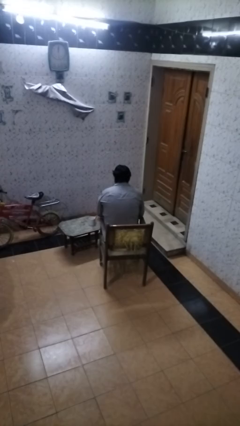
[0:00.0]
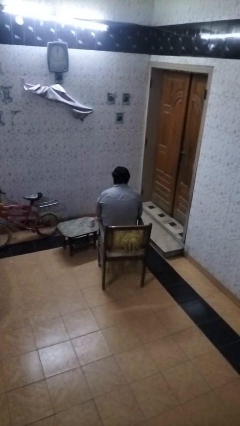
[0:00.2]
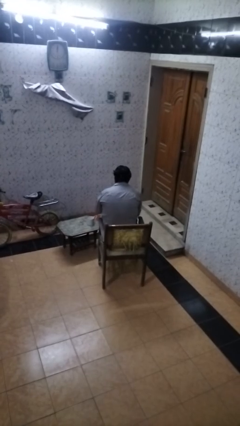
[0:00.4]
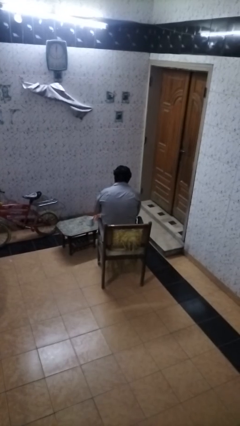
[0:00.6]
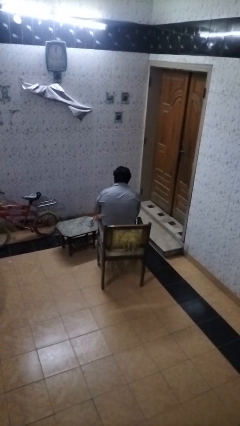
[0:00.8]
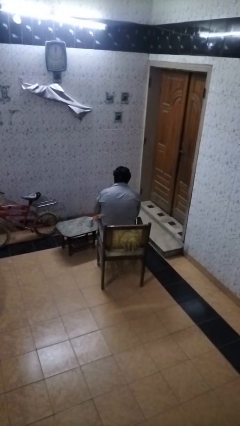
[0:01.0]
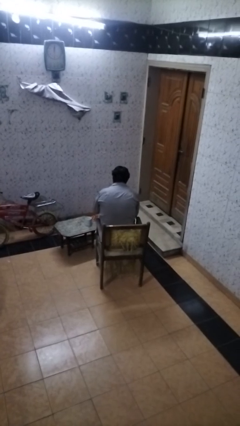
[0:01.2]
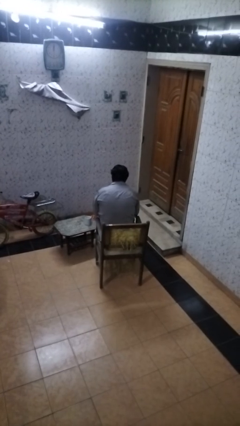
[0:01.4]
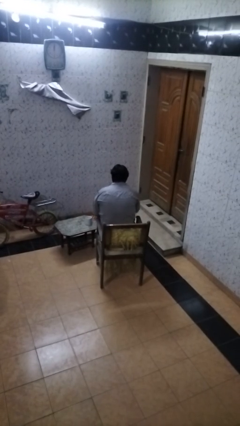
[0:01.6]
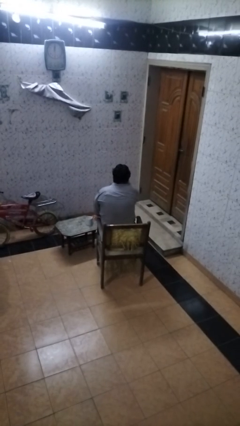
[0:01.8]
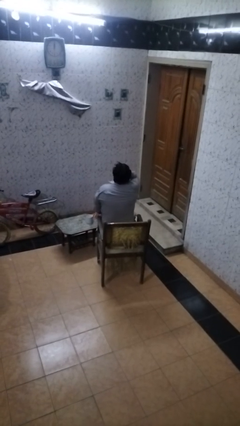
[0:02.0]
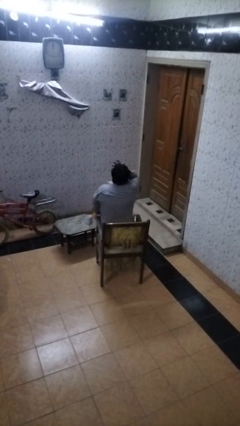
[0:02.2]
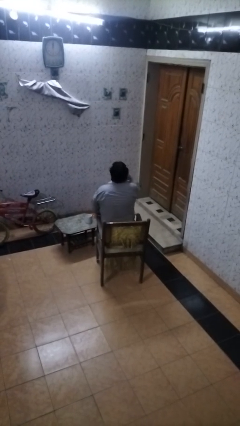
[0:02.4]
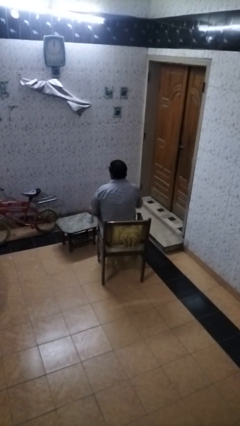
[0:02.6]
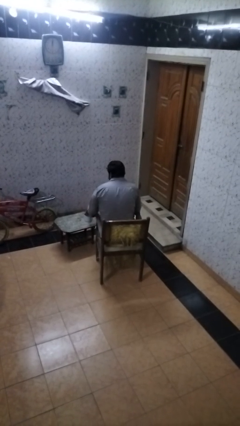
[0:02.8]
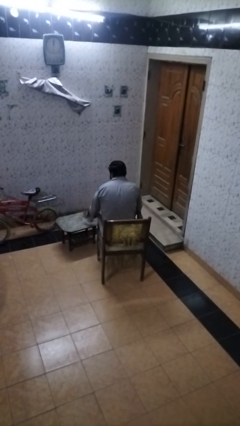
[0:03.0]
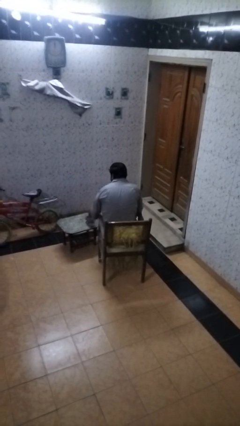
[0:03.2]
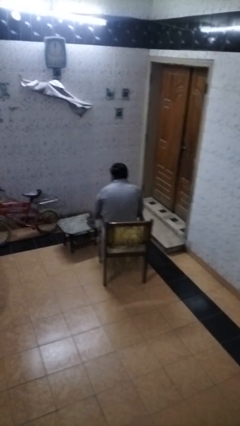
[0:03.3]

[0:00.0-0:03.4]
person takes medicine pills

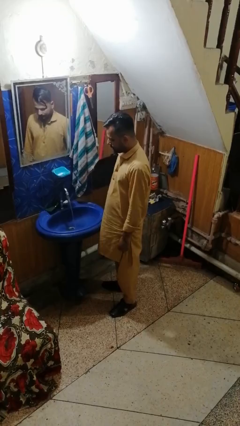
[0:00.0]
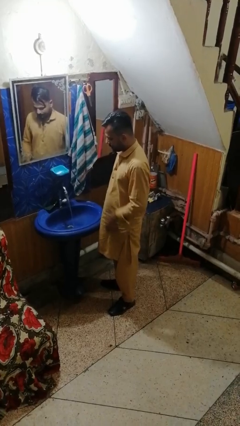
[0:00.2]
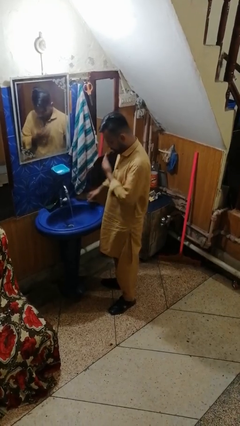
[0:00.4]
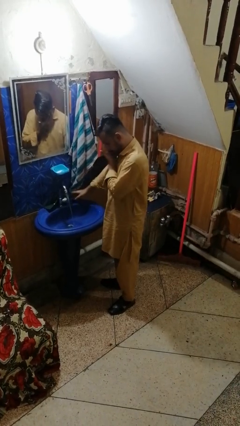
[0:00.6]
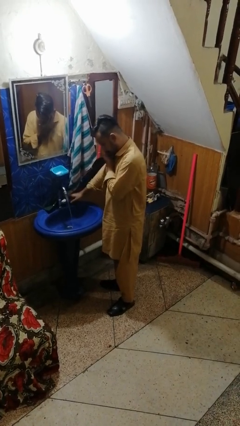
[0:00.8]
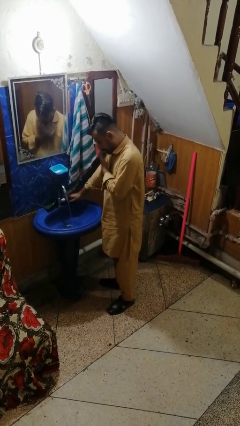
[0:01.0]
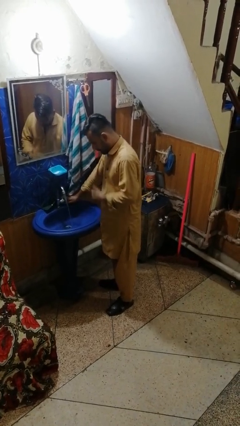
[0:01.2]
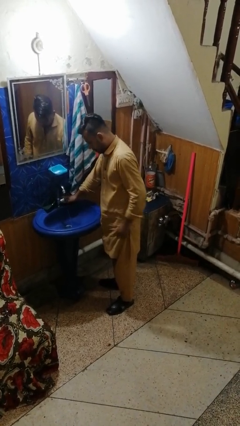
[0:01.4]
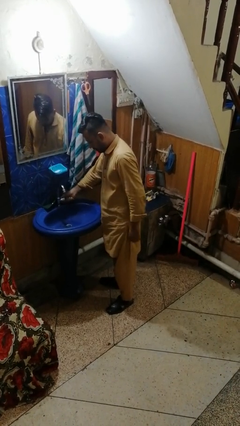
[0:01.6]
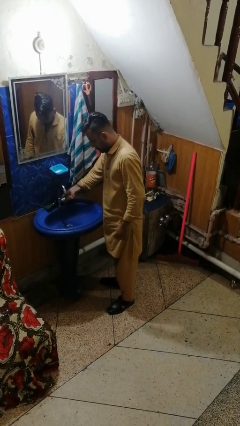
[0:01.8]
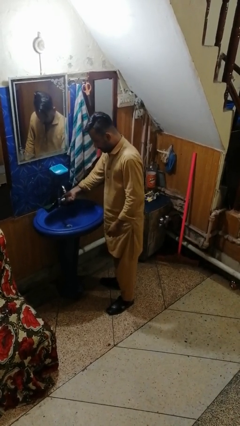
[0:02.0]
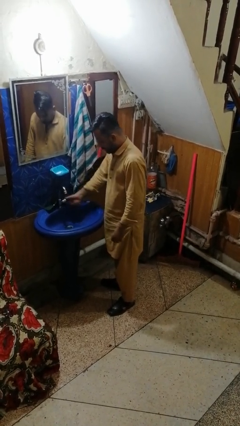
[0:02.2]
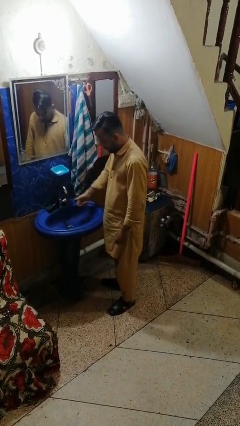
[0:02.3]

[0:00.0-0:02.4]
person turns off faucet

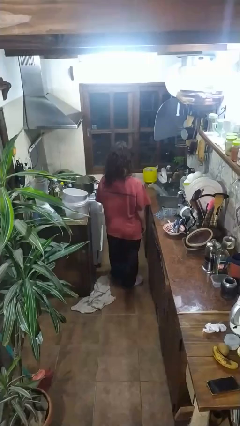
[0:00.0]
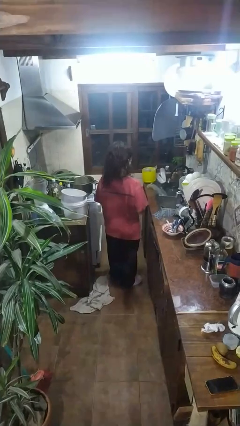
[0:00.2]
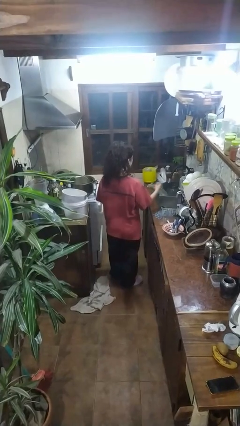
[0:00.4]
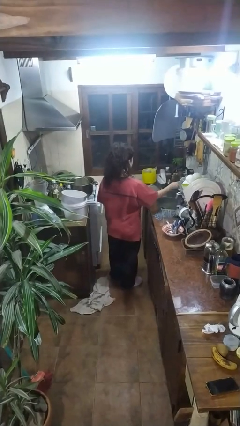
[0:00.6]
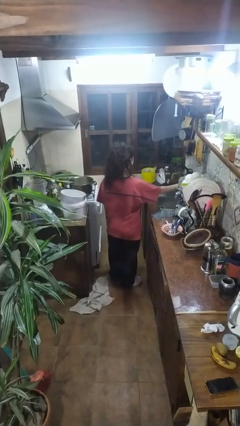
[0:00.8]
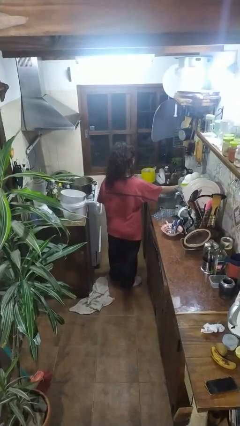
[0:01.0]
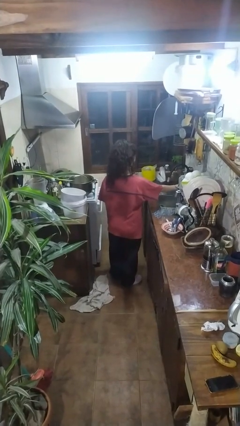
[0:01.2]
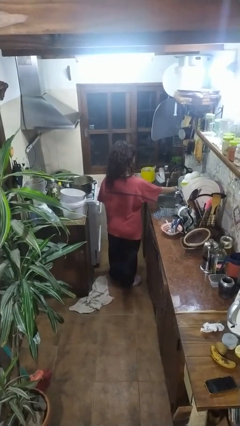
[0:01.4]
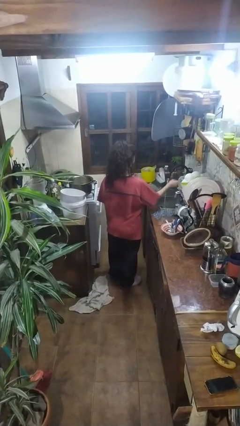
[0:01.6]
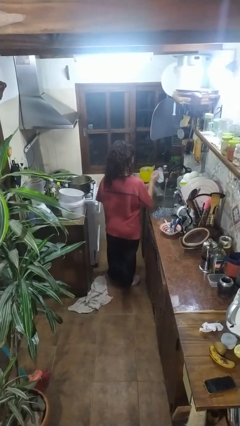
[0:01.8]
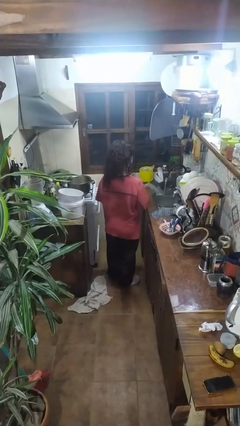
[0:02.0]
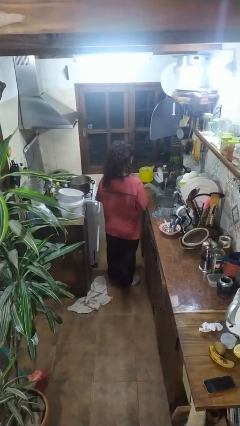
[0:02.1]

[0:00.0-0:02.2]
person opens clothes washer

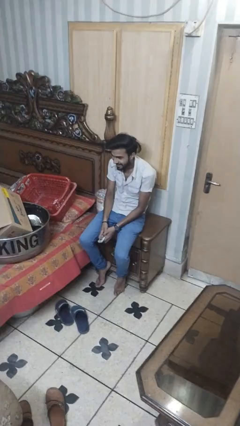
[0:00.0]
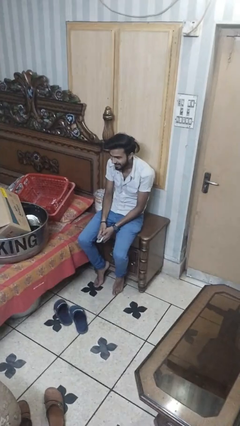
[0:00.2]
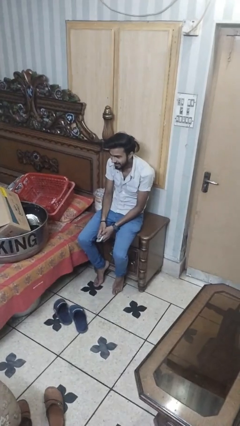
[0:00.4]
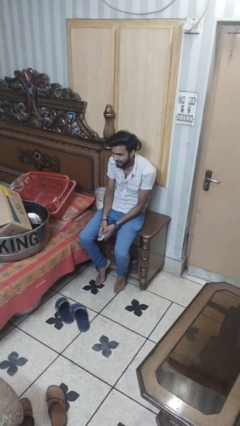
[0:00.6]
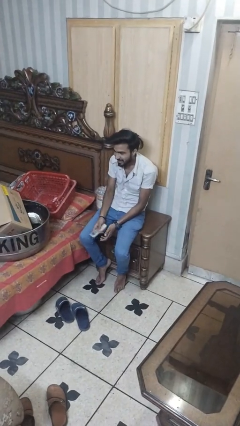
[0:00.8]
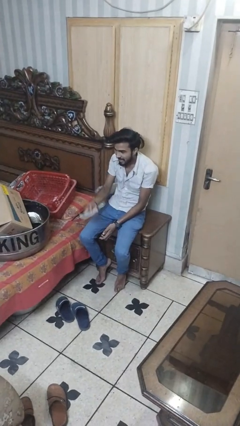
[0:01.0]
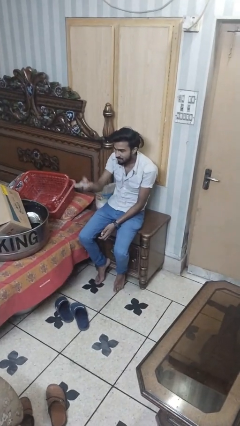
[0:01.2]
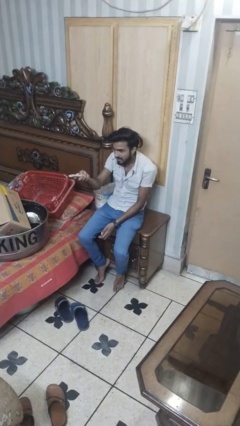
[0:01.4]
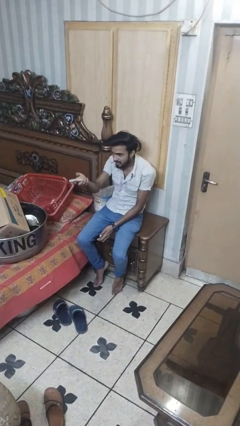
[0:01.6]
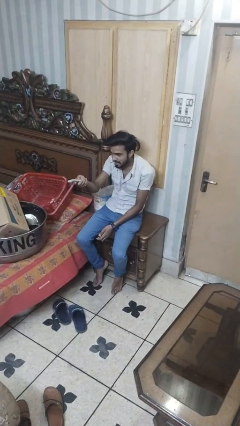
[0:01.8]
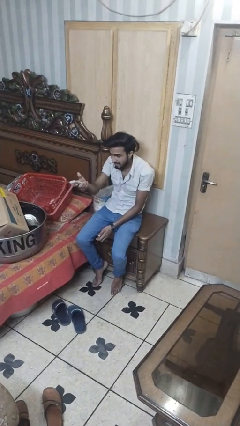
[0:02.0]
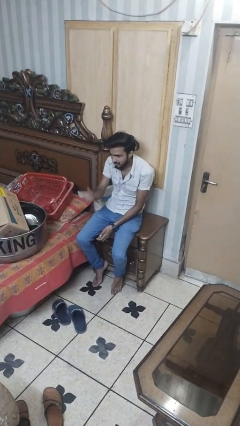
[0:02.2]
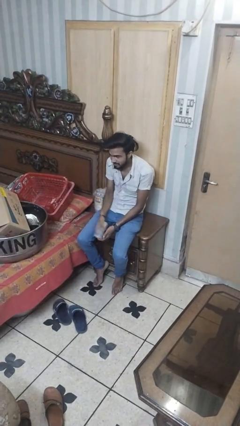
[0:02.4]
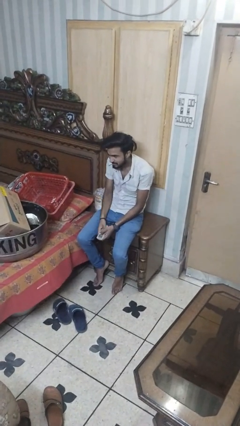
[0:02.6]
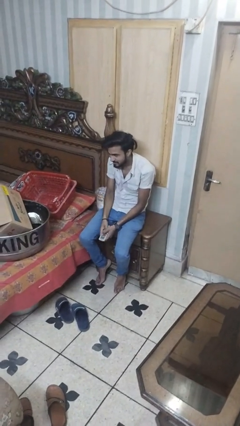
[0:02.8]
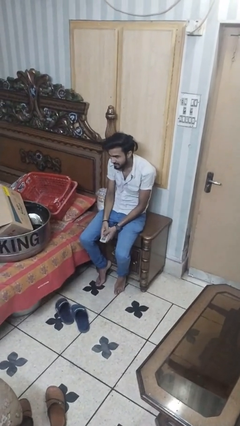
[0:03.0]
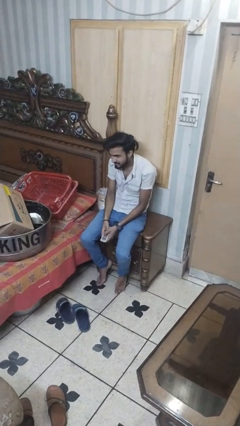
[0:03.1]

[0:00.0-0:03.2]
person uses television remote

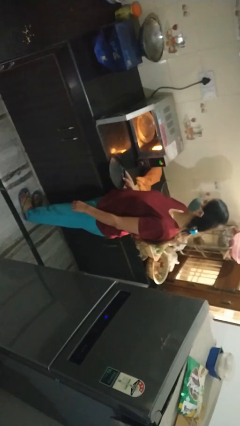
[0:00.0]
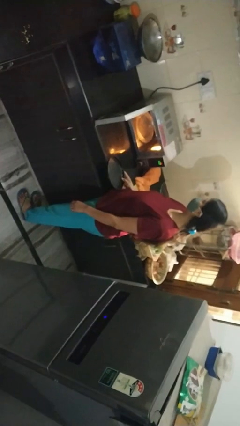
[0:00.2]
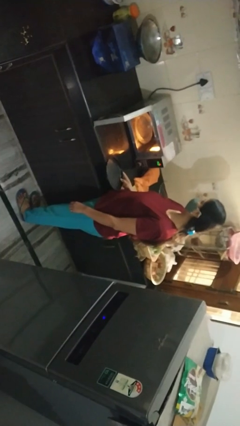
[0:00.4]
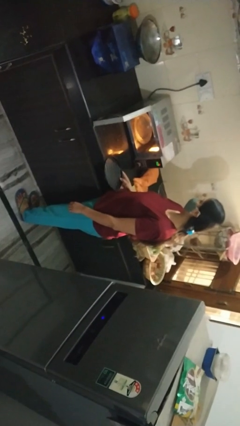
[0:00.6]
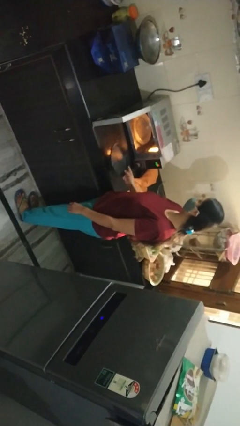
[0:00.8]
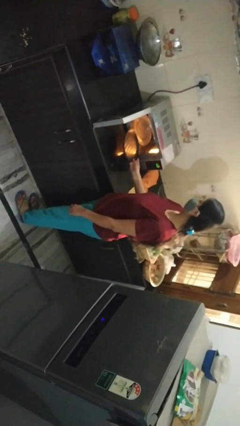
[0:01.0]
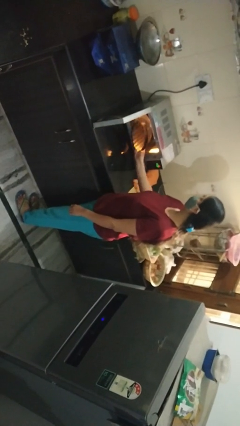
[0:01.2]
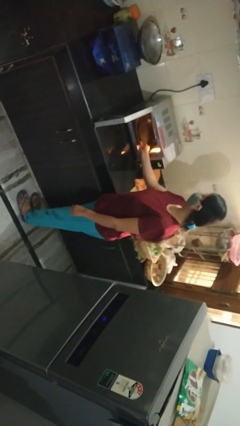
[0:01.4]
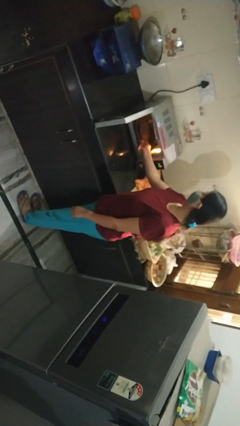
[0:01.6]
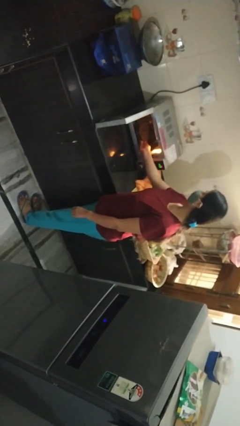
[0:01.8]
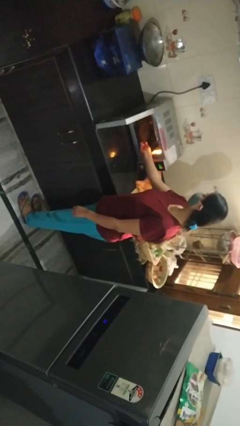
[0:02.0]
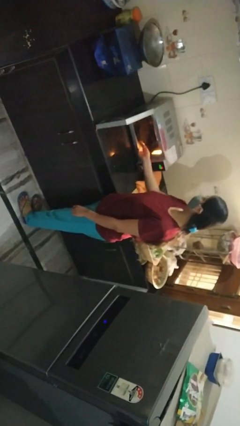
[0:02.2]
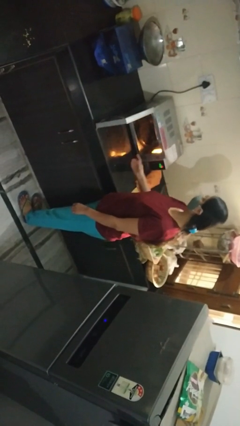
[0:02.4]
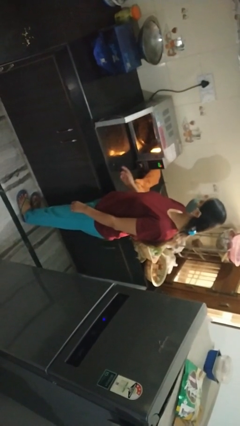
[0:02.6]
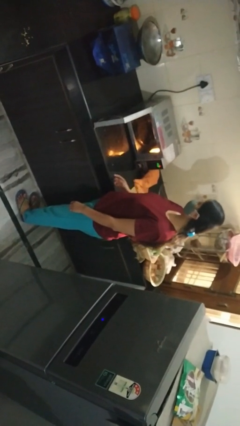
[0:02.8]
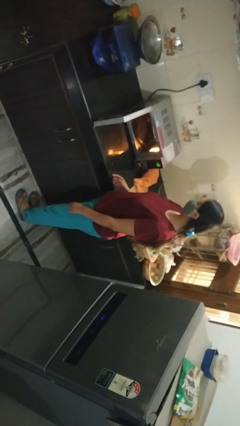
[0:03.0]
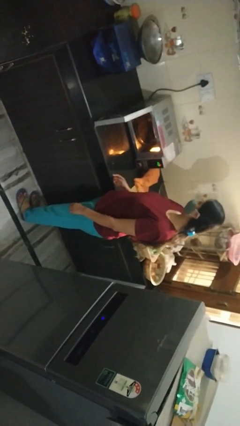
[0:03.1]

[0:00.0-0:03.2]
person puts object into microwave

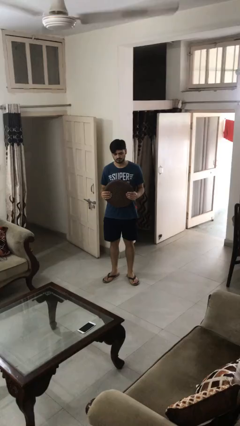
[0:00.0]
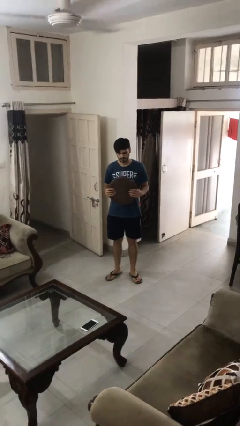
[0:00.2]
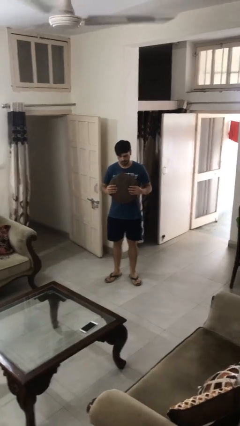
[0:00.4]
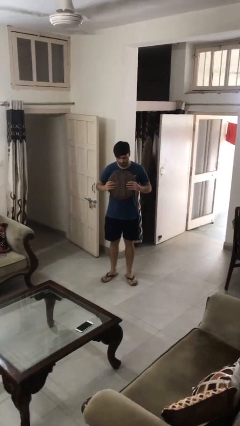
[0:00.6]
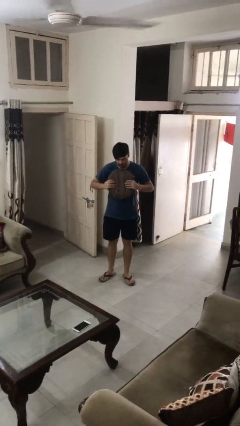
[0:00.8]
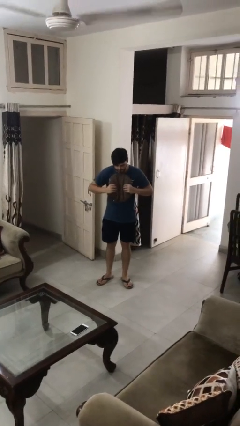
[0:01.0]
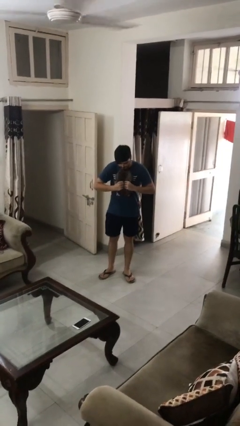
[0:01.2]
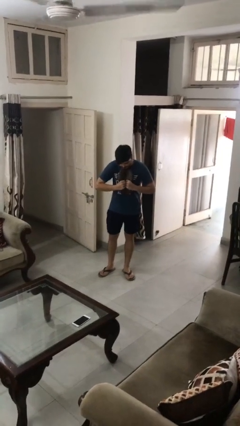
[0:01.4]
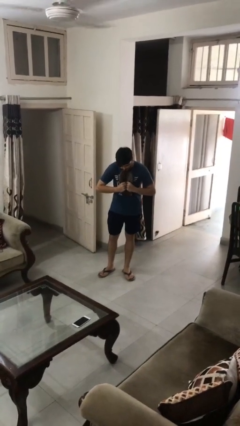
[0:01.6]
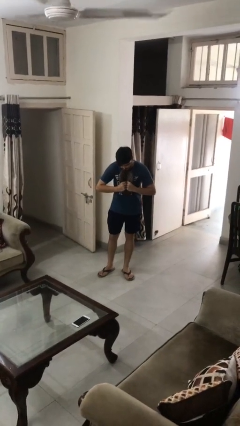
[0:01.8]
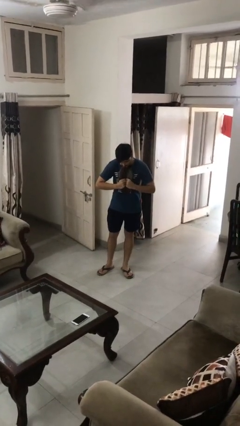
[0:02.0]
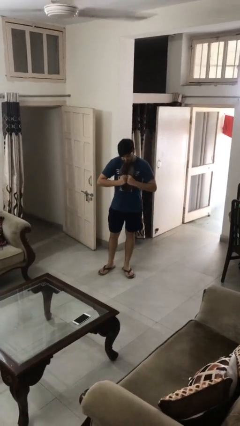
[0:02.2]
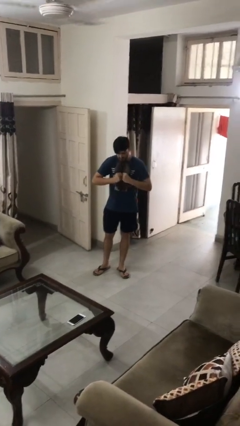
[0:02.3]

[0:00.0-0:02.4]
person squeezes object

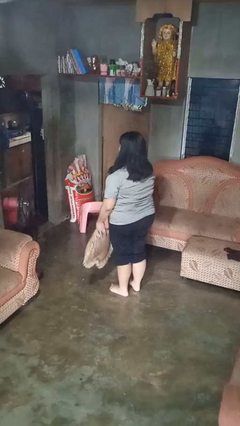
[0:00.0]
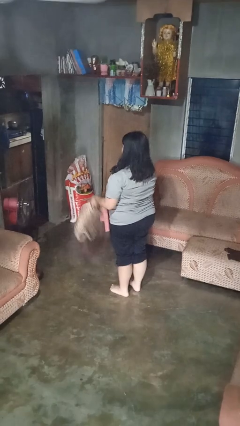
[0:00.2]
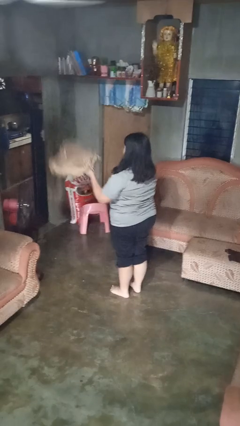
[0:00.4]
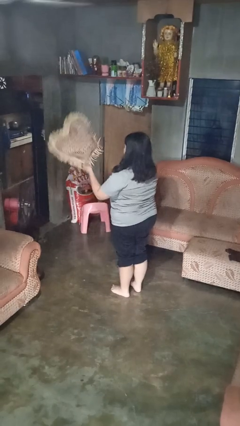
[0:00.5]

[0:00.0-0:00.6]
person throws object into air
